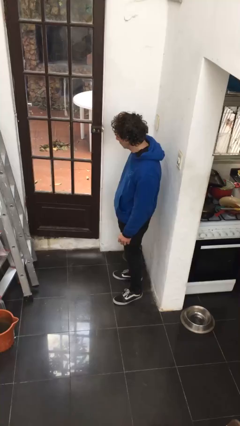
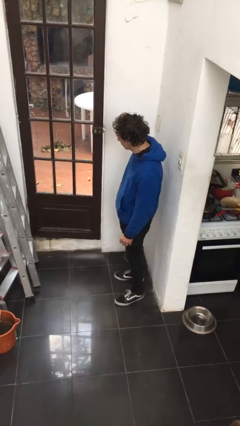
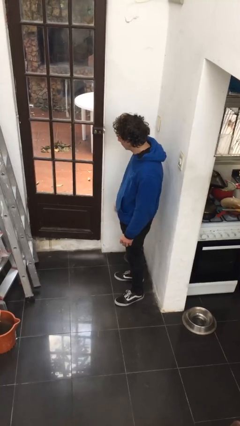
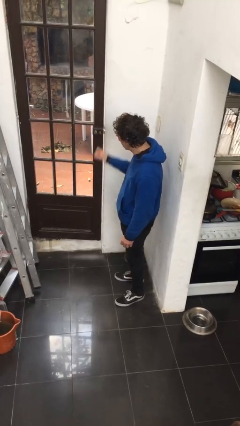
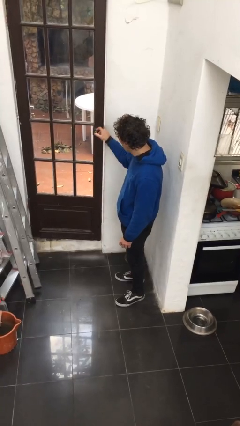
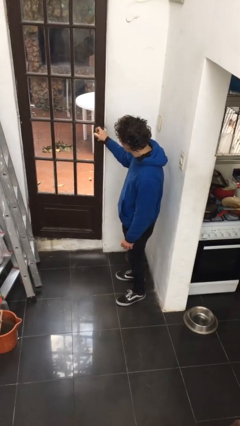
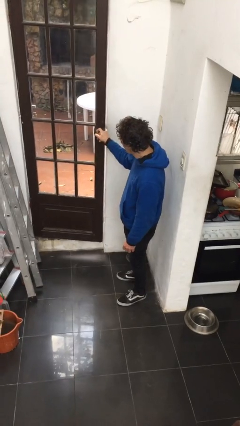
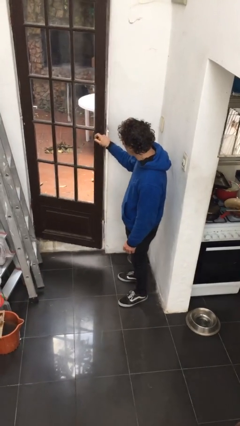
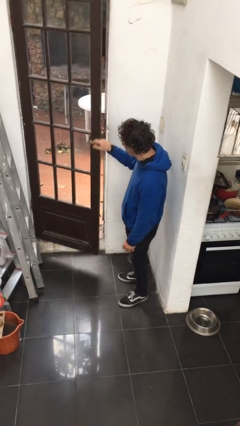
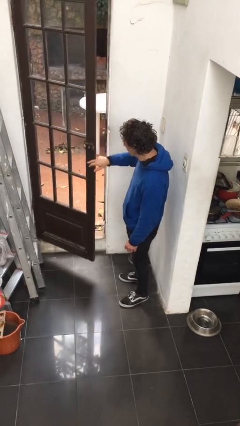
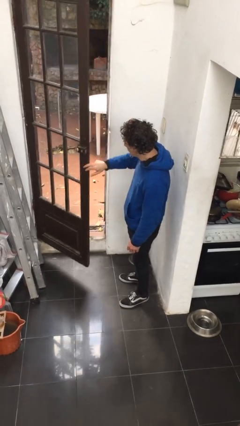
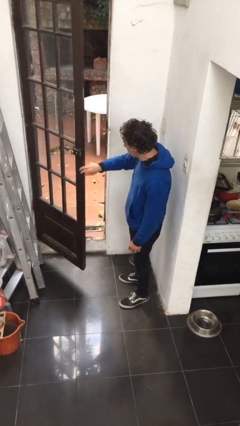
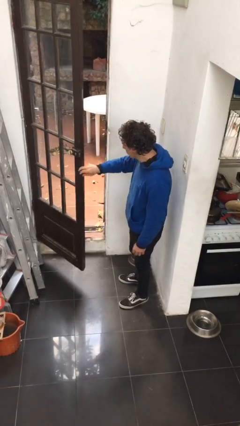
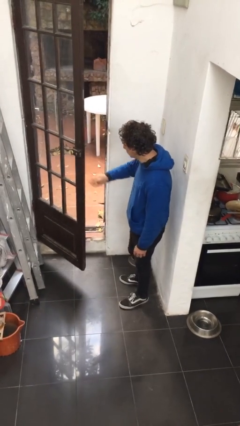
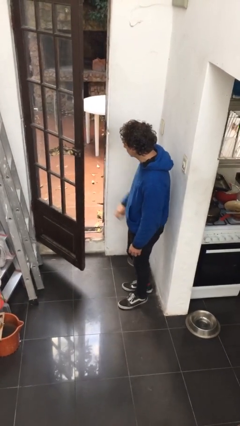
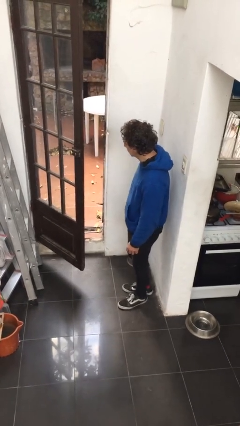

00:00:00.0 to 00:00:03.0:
person opens facility door

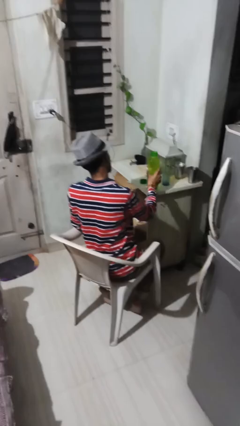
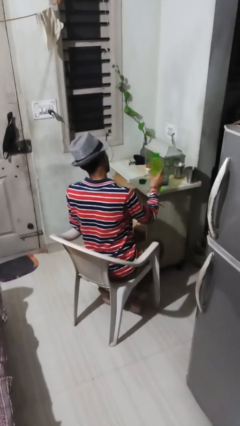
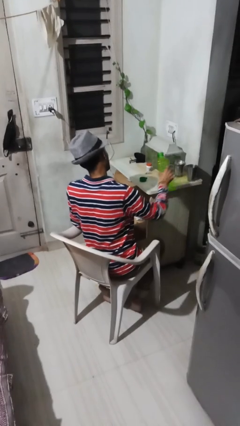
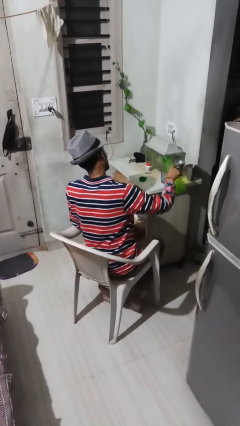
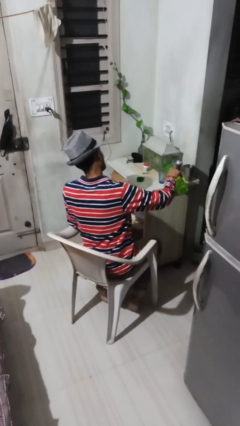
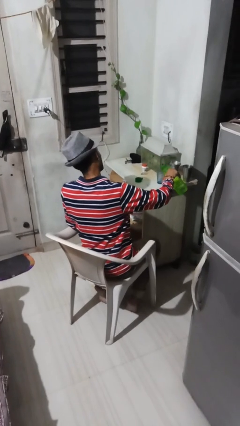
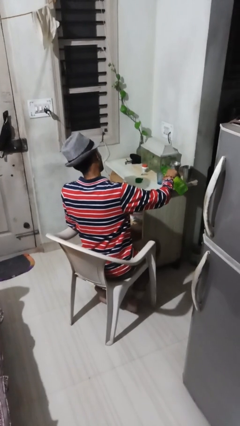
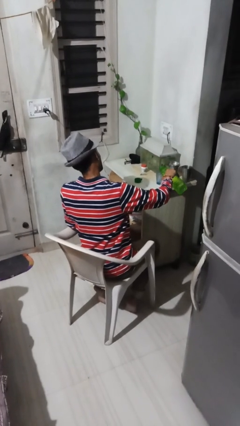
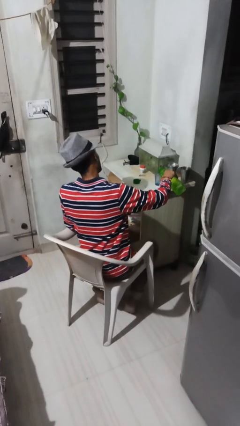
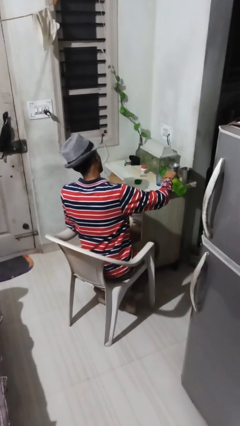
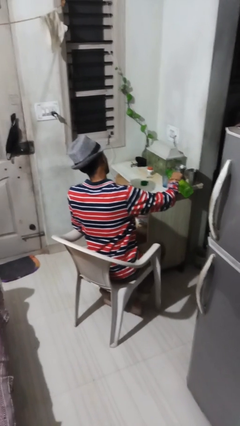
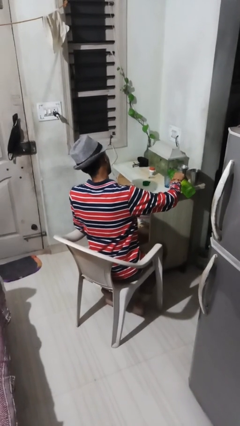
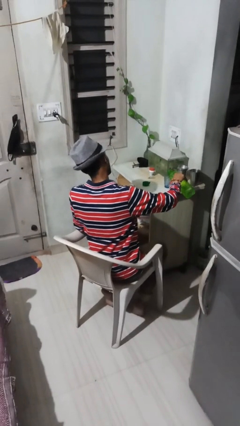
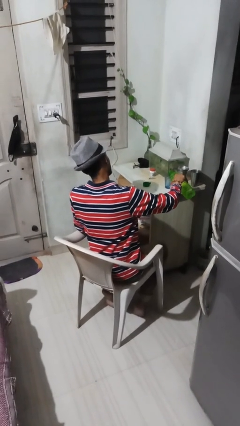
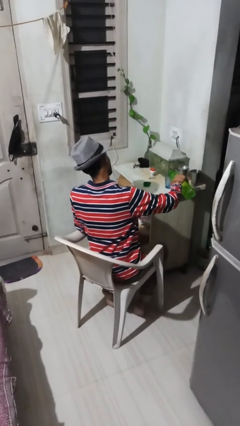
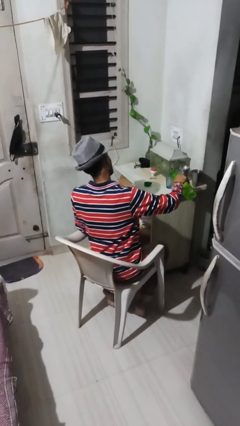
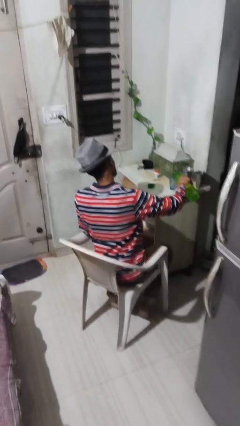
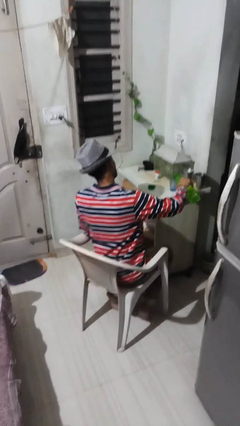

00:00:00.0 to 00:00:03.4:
person pours liquid into cup

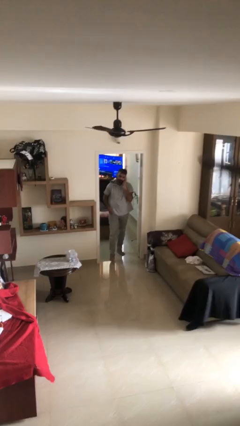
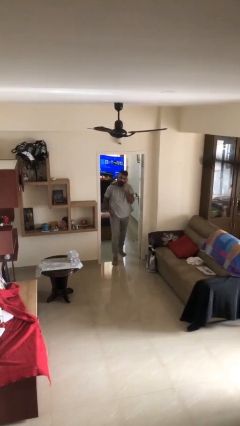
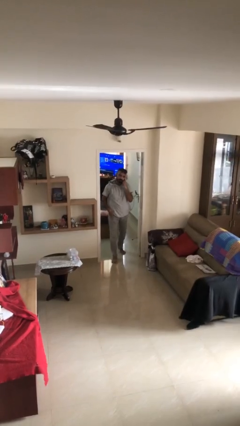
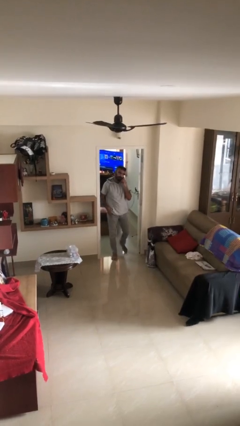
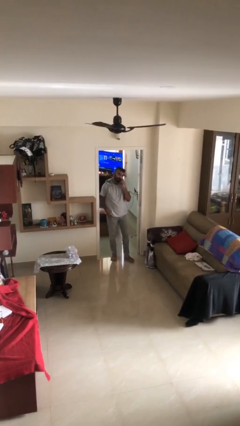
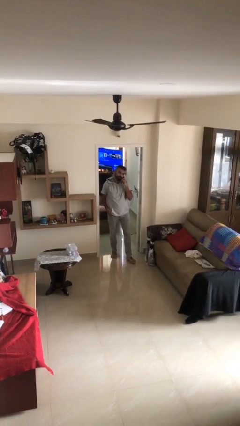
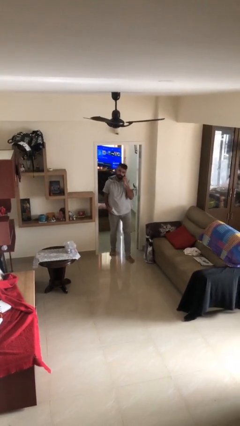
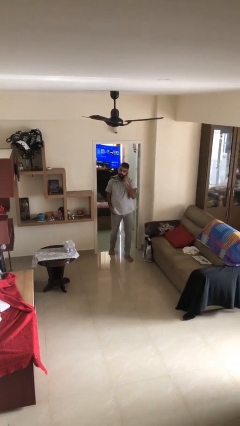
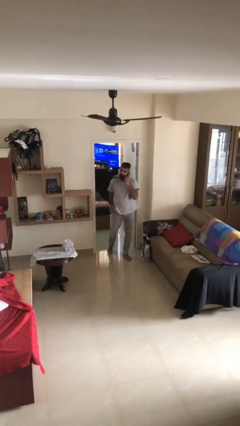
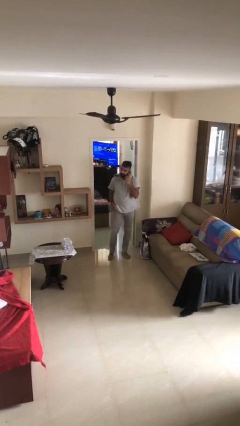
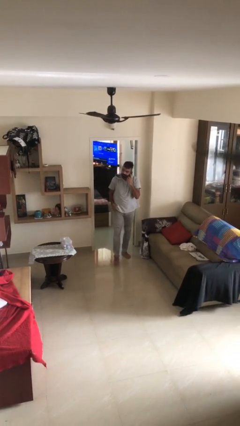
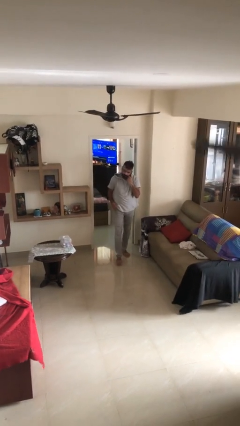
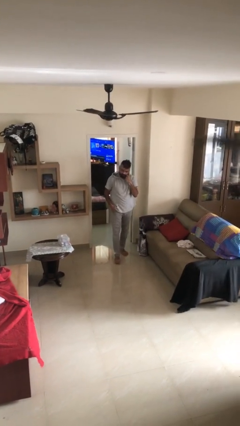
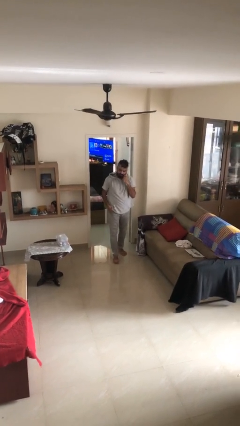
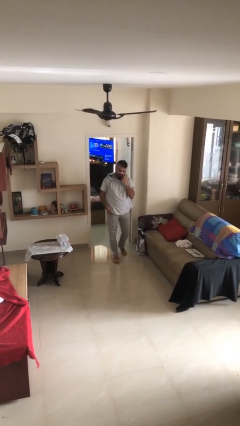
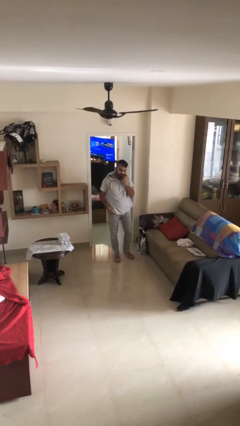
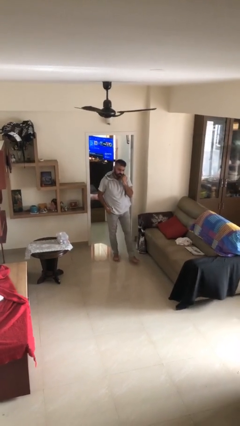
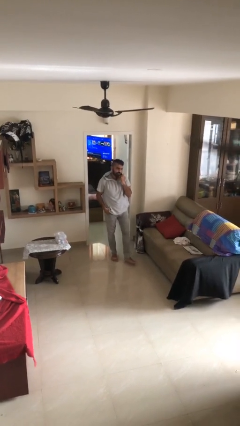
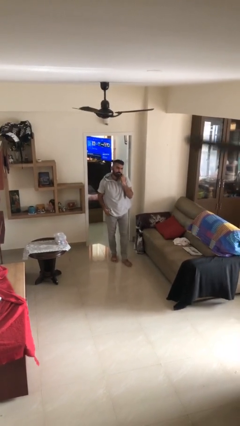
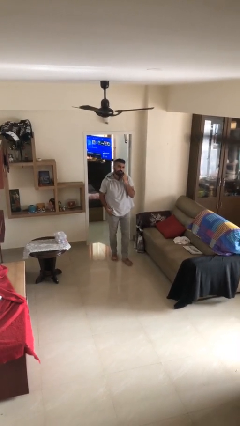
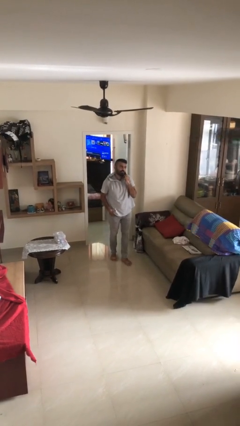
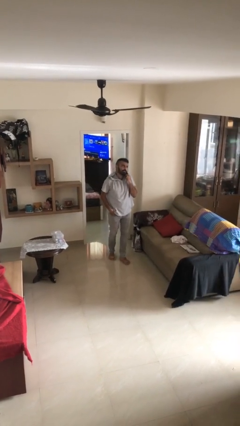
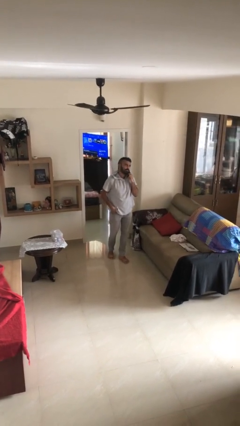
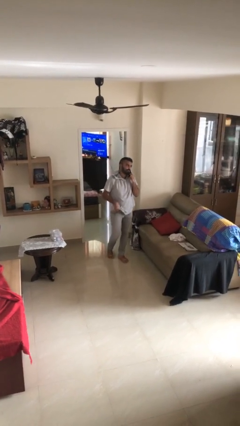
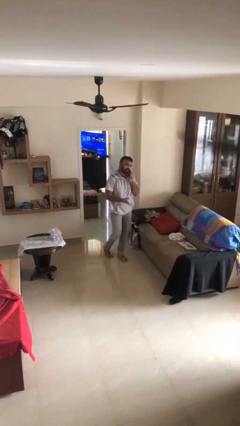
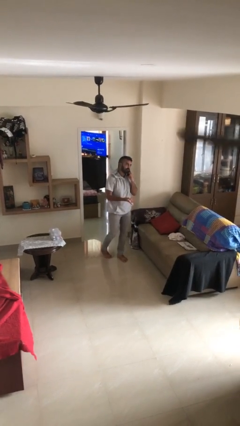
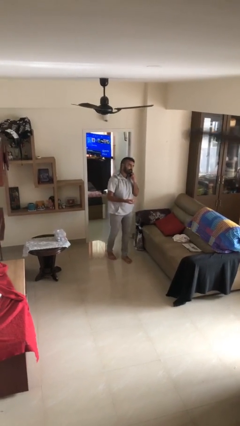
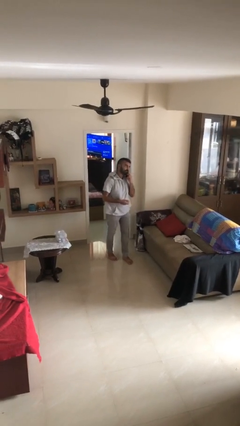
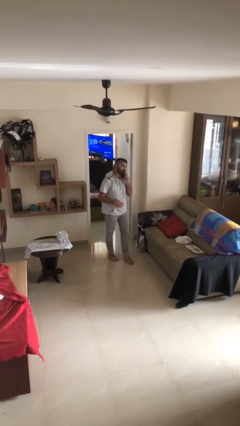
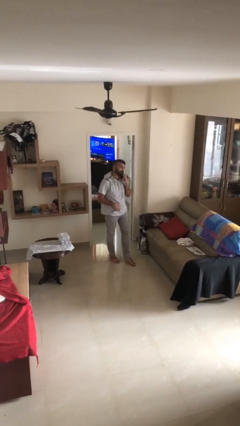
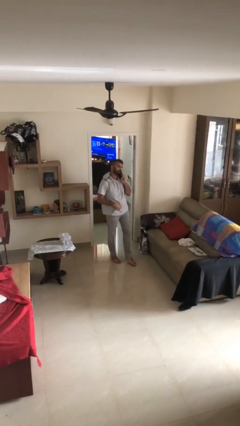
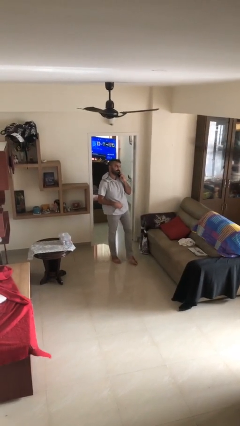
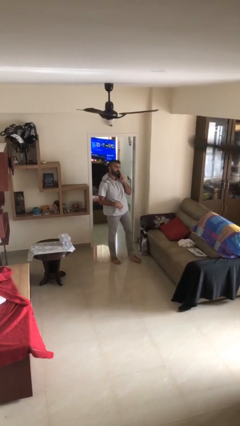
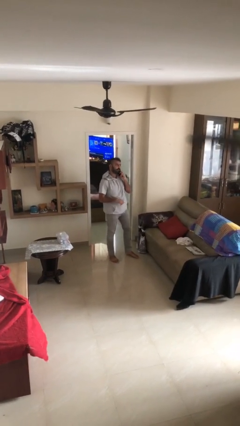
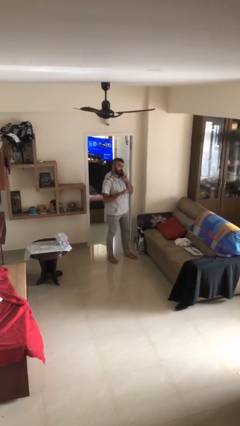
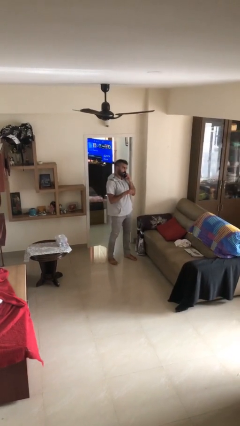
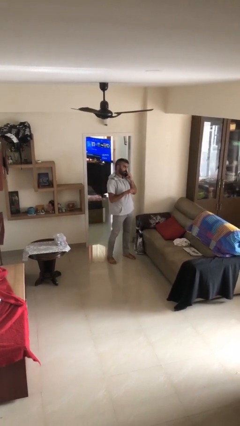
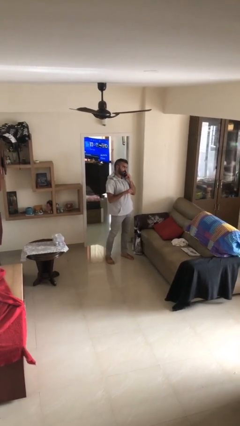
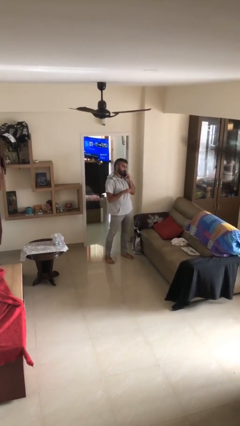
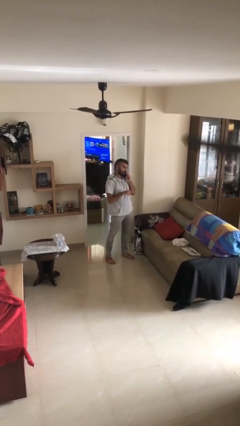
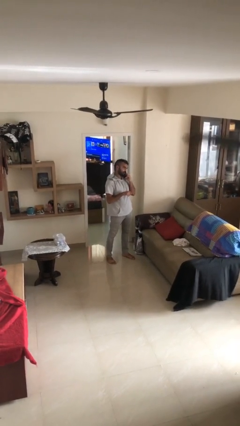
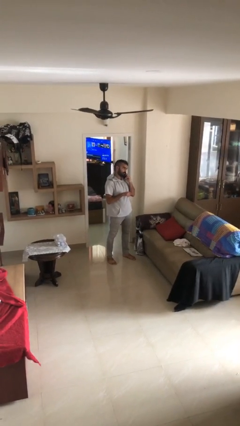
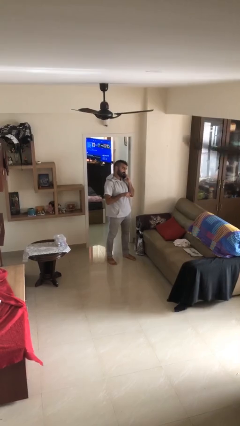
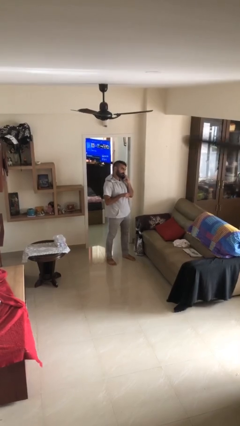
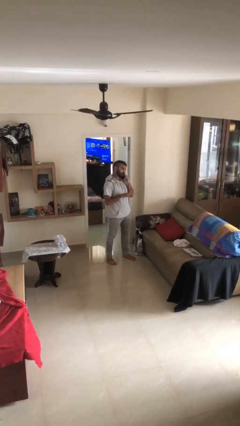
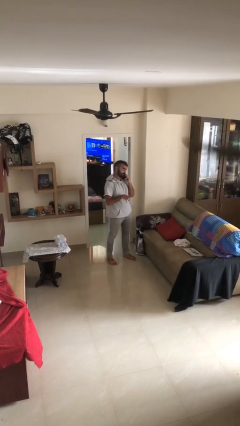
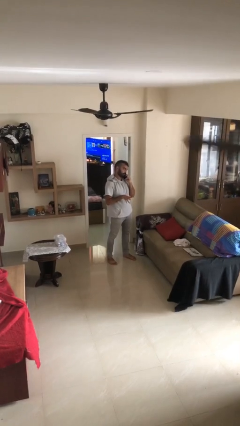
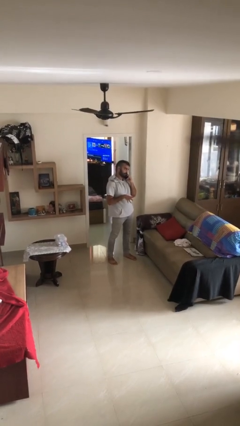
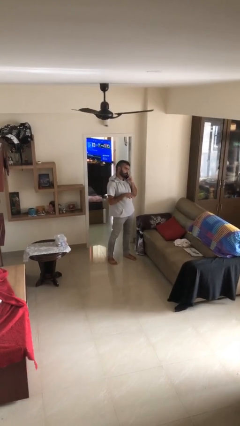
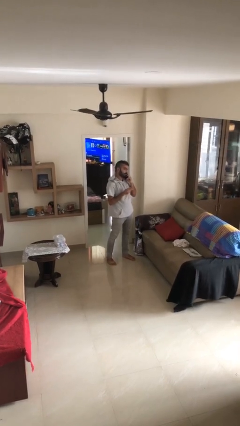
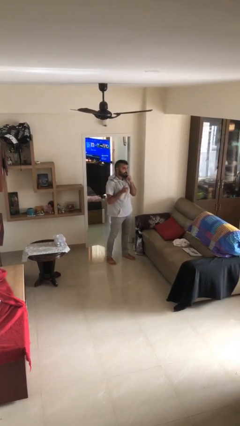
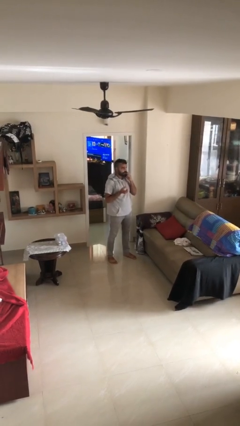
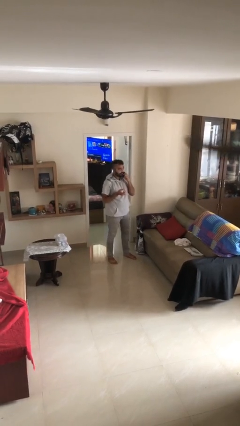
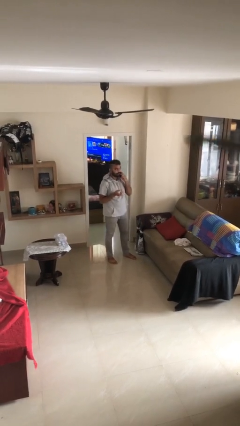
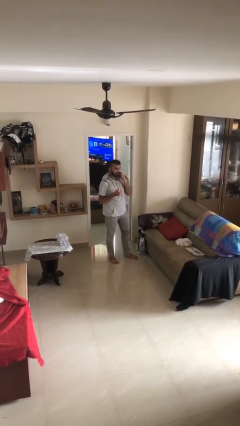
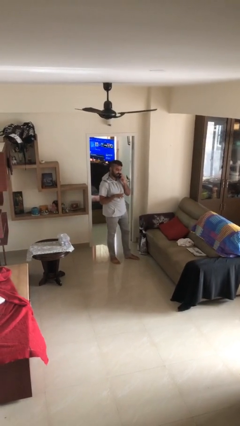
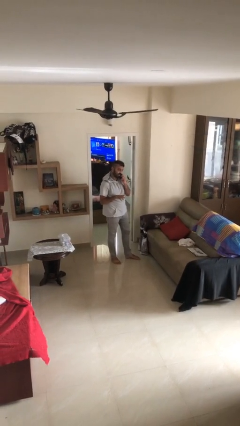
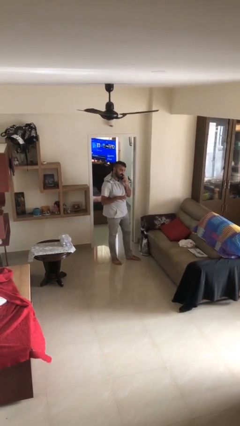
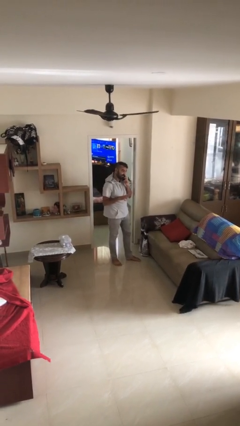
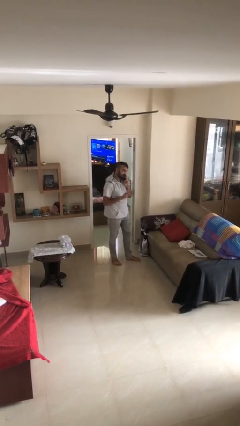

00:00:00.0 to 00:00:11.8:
person enters scene through structure
